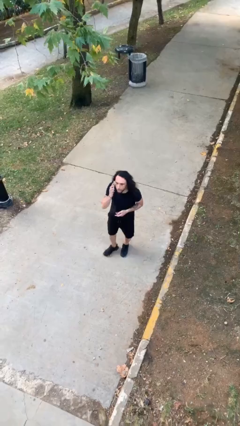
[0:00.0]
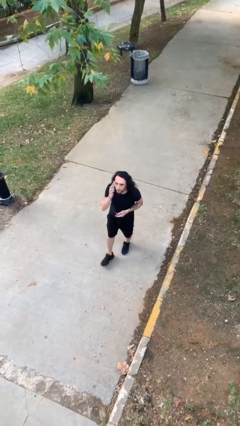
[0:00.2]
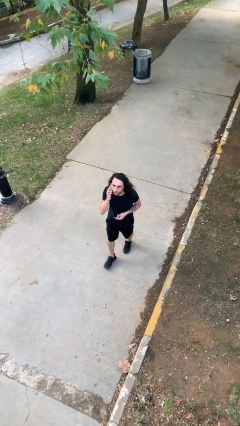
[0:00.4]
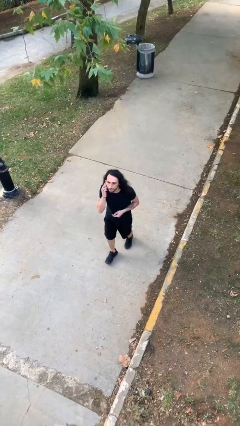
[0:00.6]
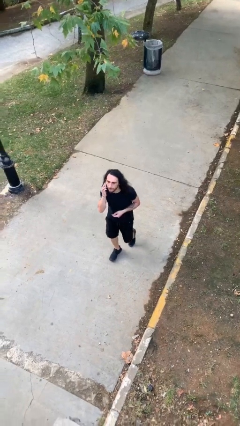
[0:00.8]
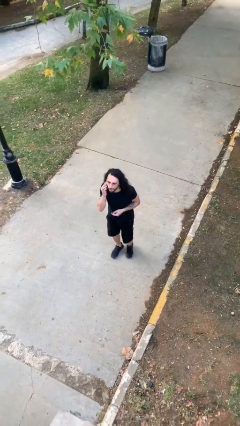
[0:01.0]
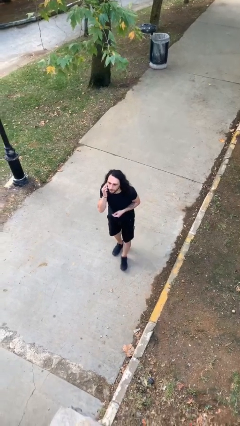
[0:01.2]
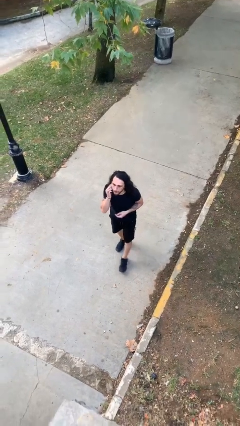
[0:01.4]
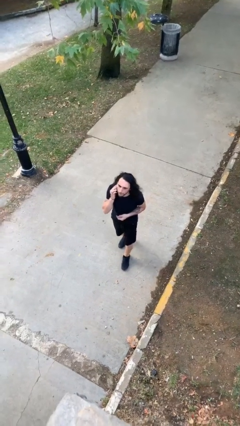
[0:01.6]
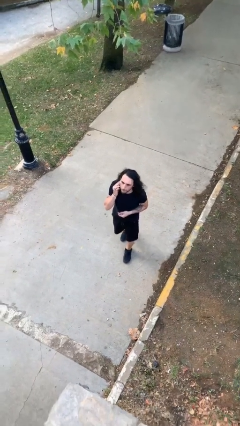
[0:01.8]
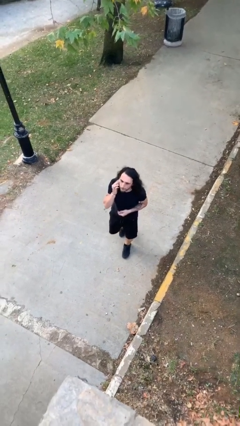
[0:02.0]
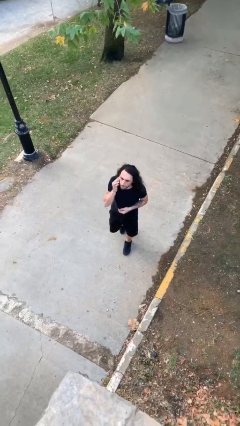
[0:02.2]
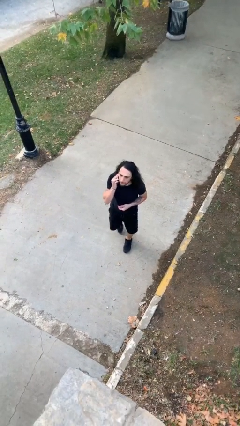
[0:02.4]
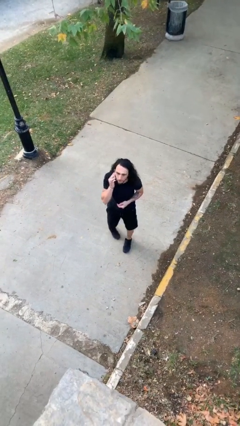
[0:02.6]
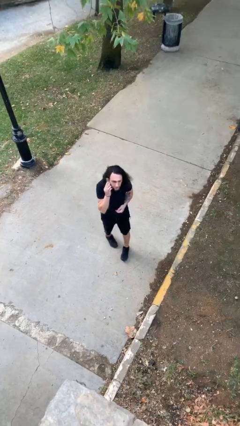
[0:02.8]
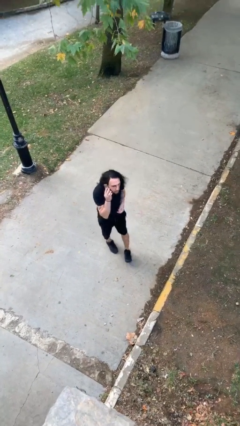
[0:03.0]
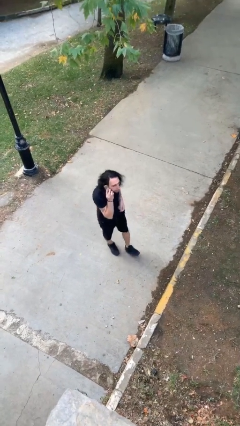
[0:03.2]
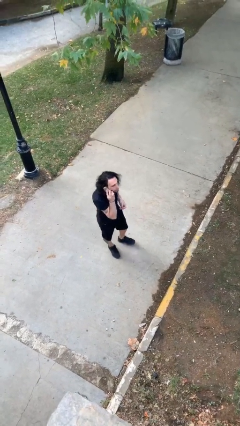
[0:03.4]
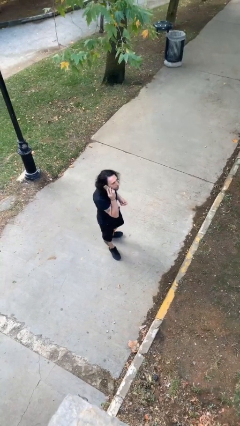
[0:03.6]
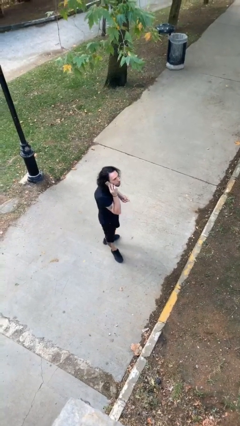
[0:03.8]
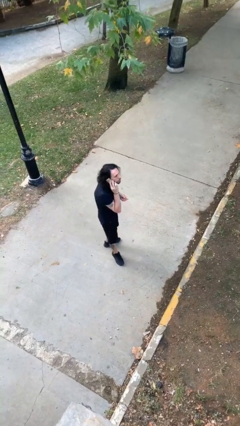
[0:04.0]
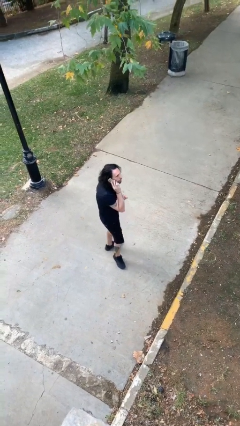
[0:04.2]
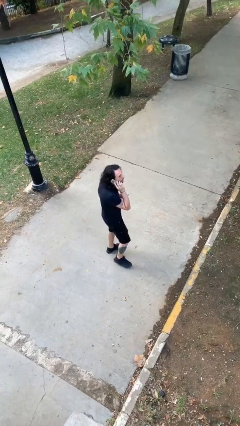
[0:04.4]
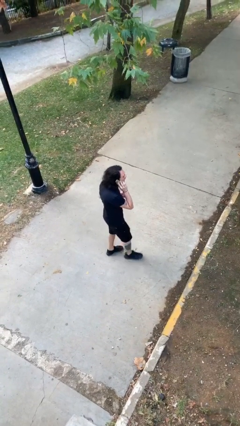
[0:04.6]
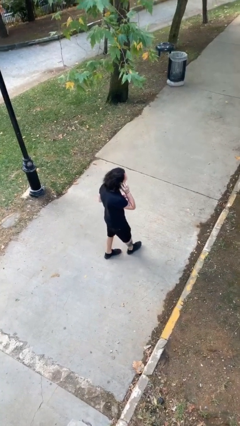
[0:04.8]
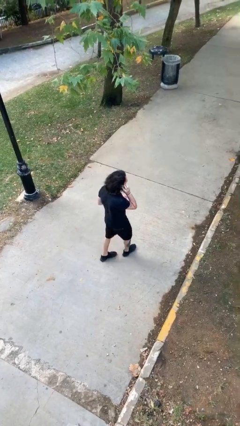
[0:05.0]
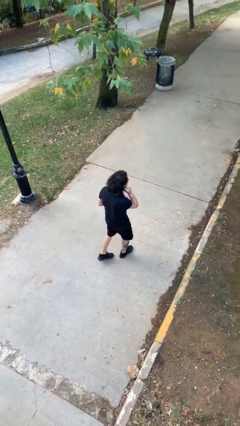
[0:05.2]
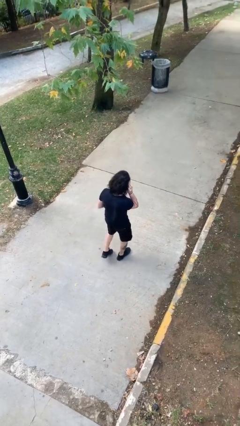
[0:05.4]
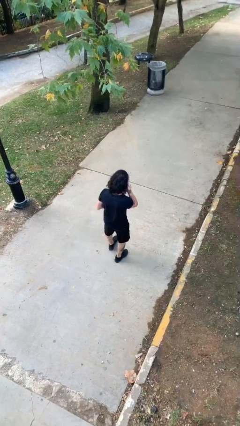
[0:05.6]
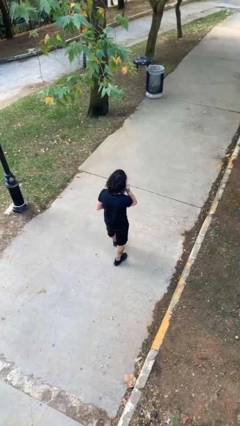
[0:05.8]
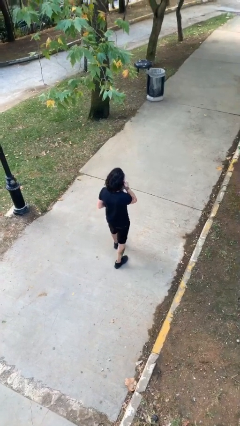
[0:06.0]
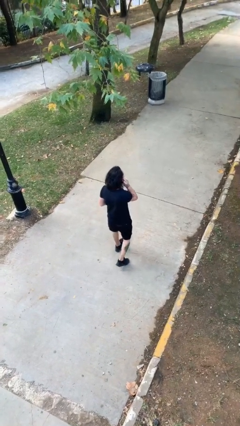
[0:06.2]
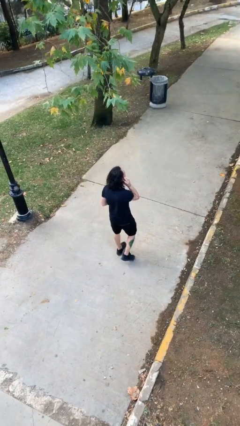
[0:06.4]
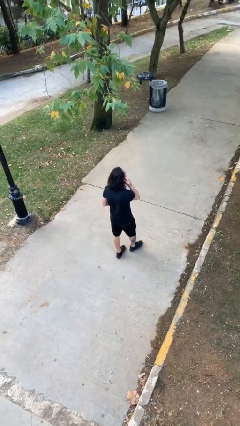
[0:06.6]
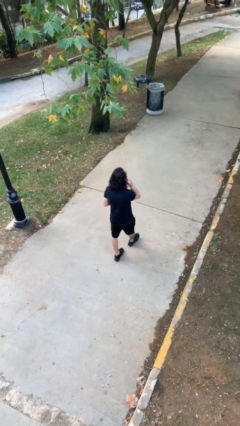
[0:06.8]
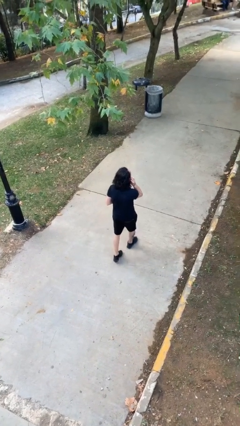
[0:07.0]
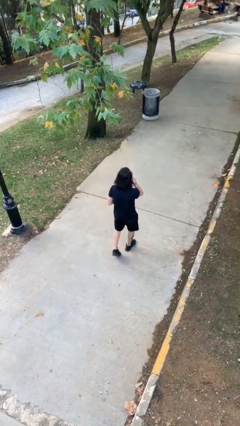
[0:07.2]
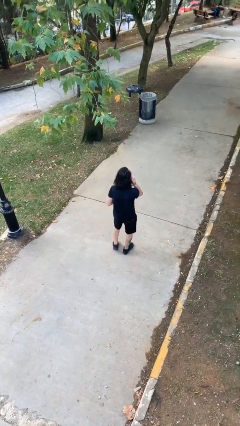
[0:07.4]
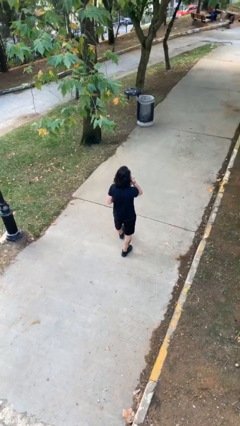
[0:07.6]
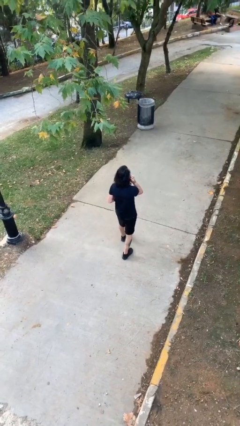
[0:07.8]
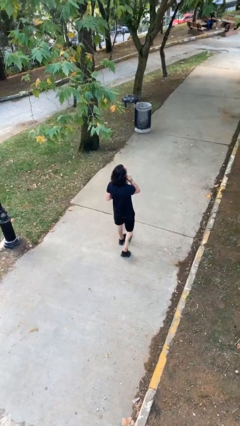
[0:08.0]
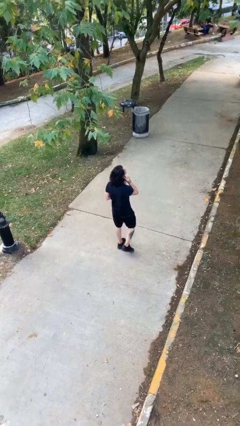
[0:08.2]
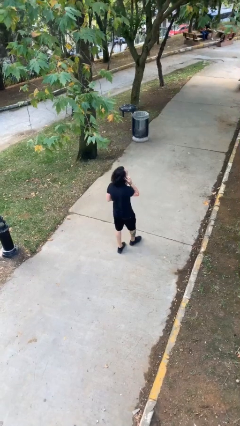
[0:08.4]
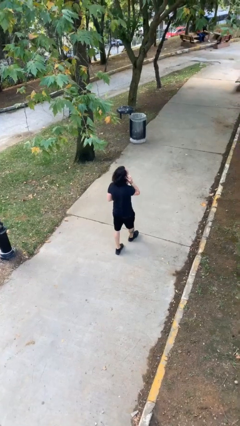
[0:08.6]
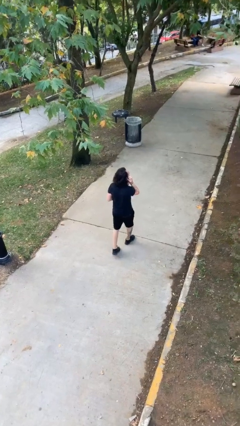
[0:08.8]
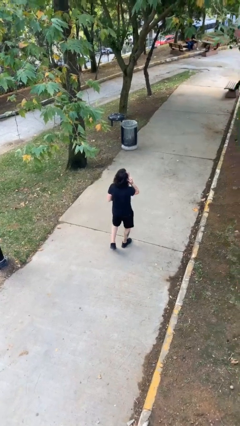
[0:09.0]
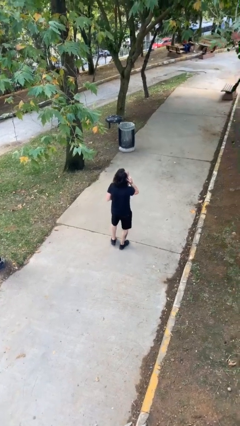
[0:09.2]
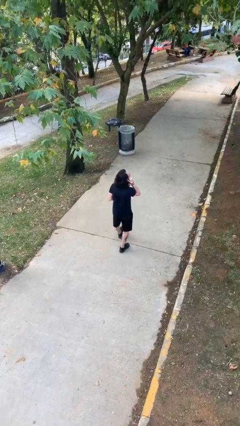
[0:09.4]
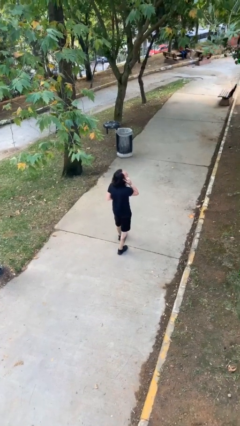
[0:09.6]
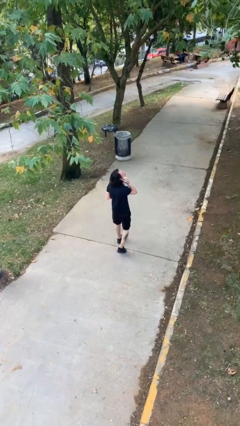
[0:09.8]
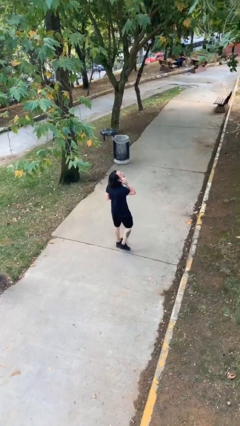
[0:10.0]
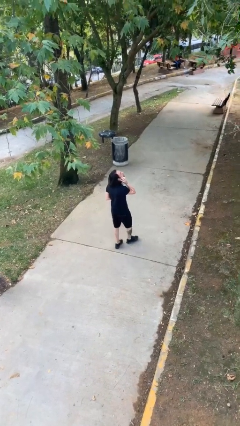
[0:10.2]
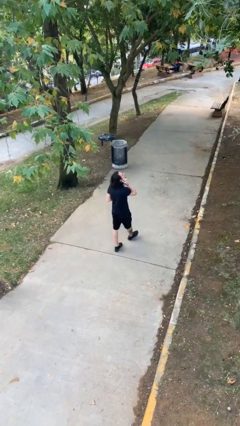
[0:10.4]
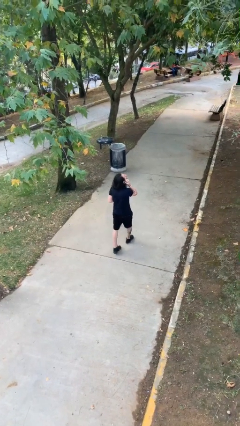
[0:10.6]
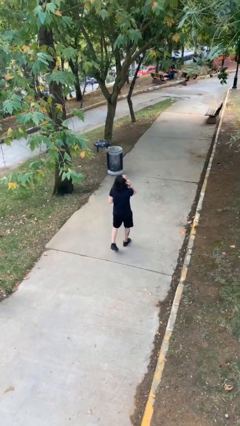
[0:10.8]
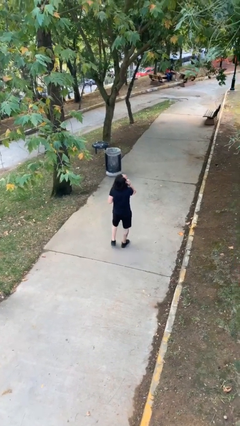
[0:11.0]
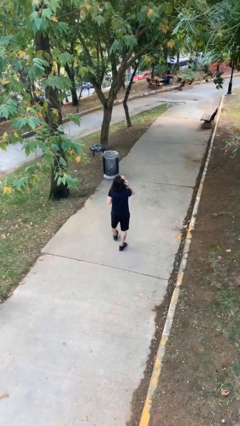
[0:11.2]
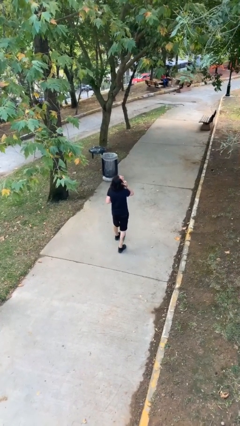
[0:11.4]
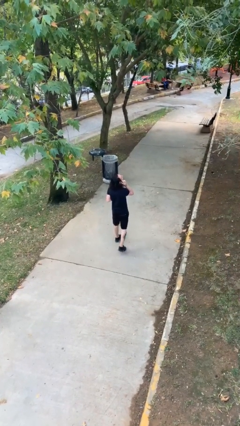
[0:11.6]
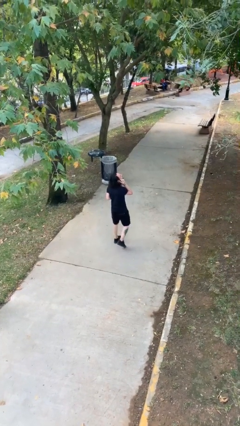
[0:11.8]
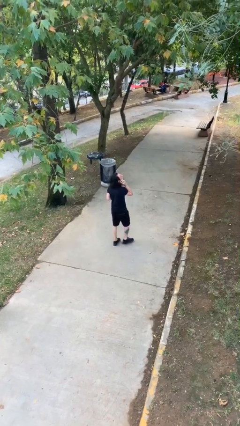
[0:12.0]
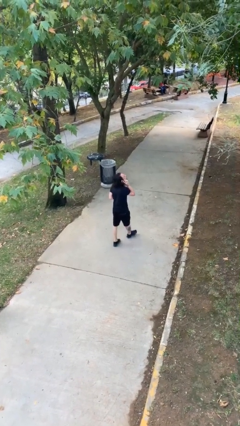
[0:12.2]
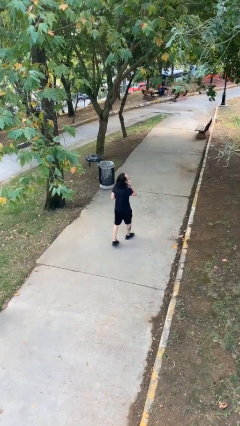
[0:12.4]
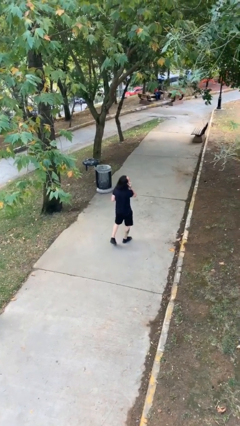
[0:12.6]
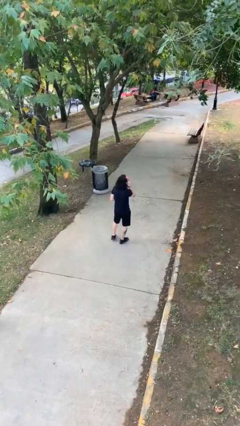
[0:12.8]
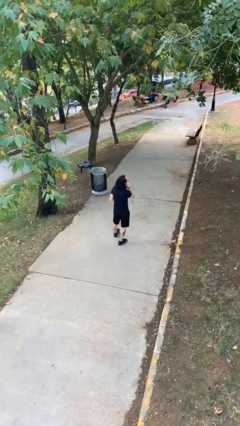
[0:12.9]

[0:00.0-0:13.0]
person talks on phone

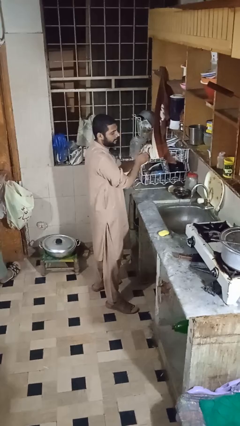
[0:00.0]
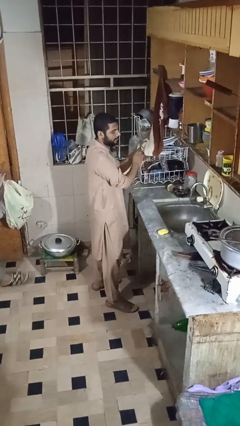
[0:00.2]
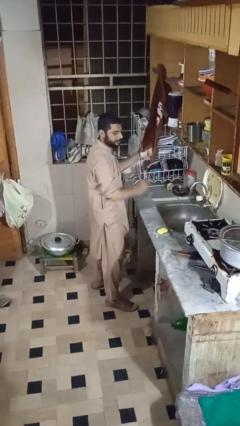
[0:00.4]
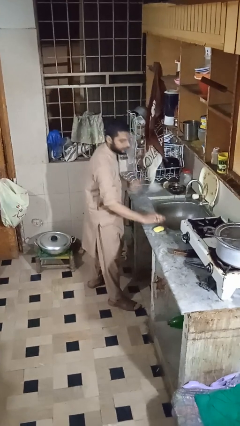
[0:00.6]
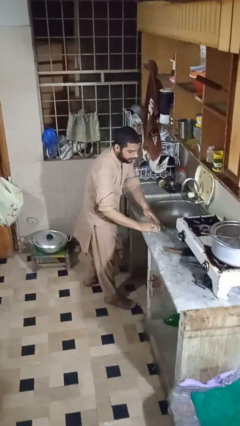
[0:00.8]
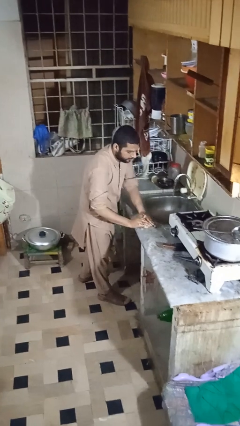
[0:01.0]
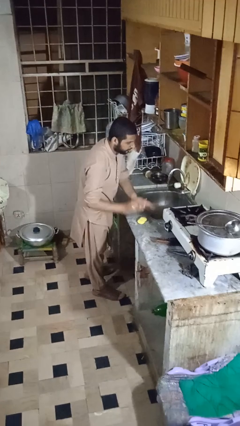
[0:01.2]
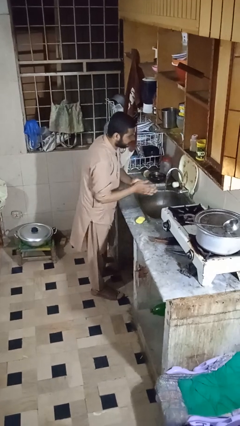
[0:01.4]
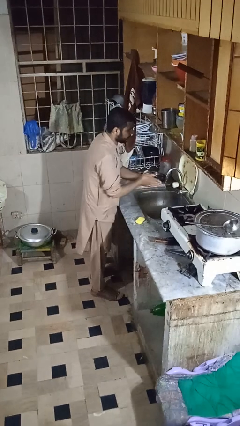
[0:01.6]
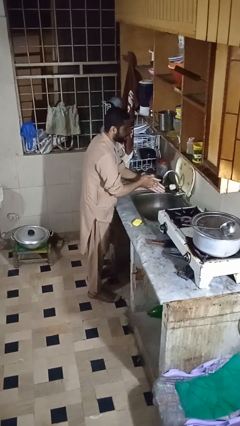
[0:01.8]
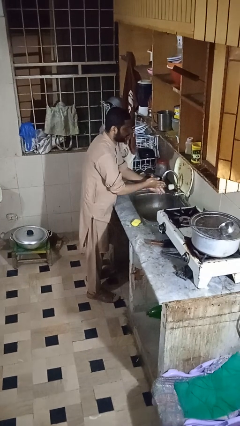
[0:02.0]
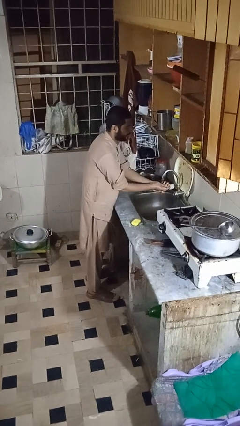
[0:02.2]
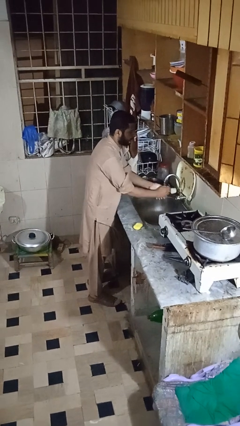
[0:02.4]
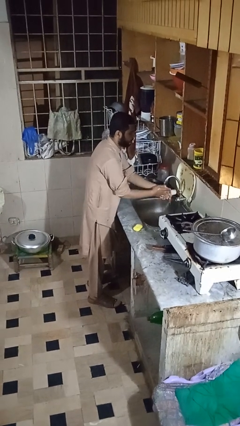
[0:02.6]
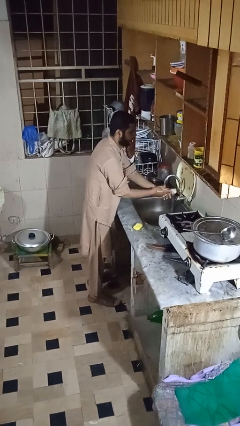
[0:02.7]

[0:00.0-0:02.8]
person washes hands

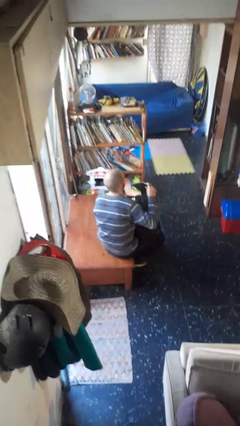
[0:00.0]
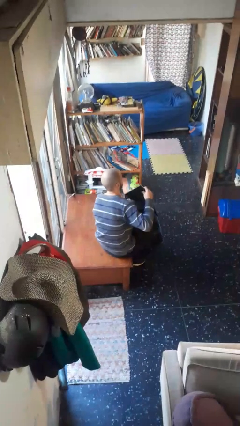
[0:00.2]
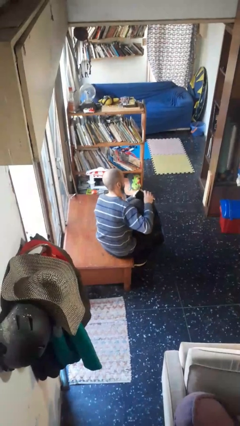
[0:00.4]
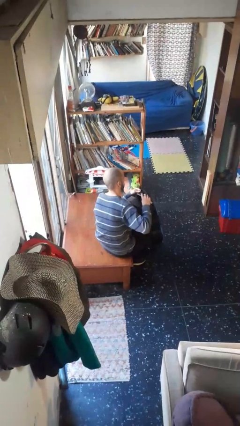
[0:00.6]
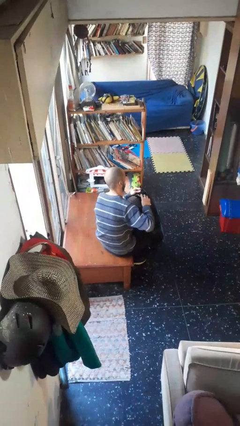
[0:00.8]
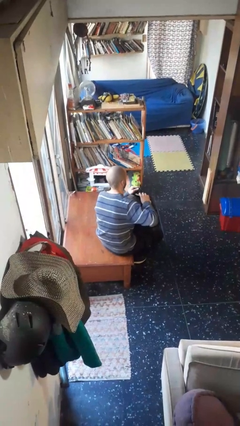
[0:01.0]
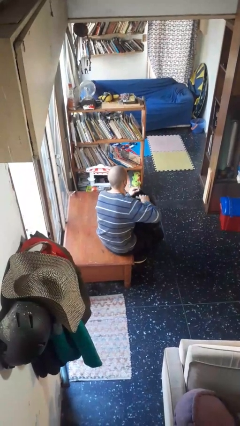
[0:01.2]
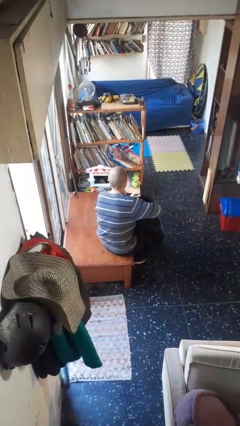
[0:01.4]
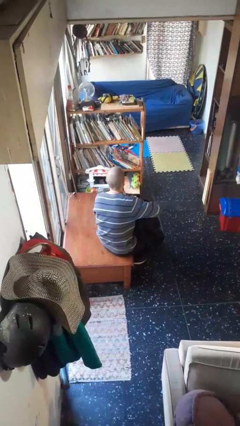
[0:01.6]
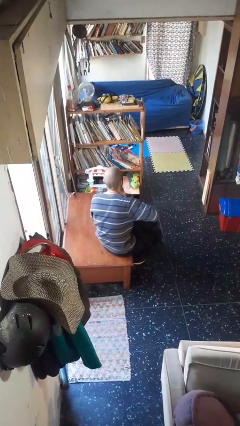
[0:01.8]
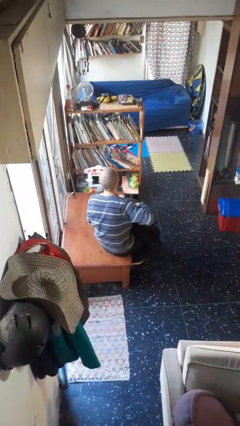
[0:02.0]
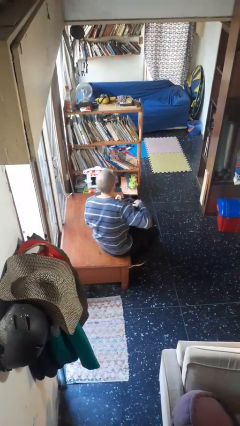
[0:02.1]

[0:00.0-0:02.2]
person puts object into backpack

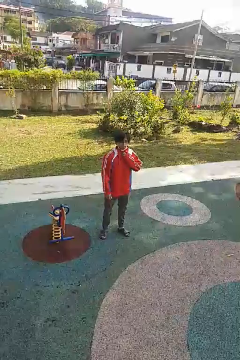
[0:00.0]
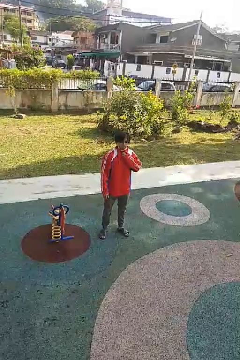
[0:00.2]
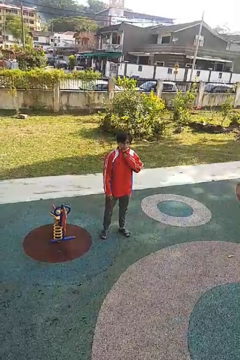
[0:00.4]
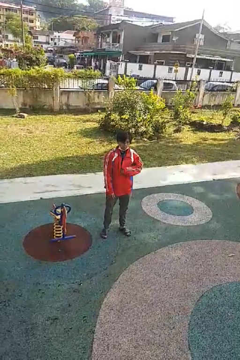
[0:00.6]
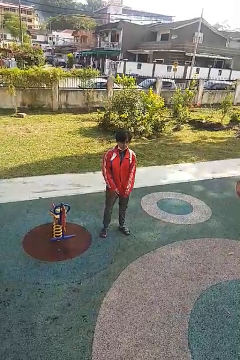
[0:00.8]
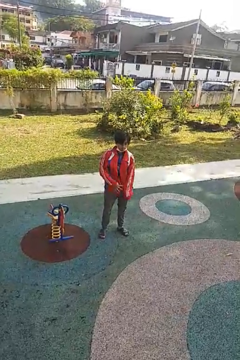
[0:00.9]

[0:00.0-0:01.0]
person unzips jacket
